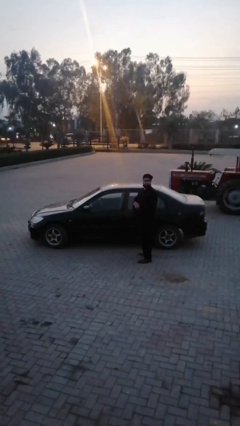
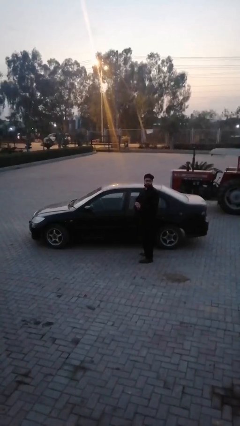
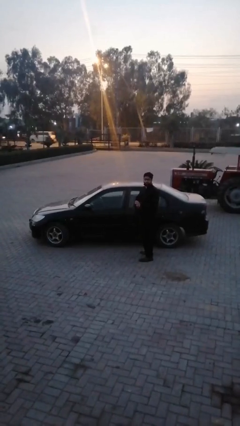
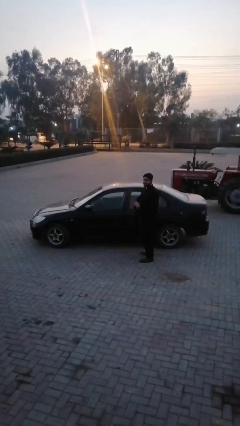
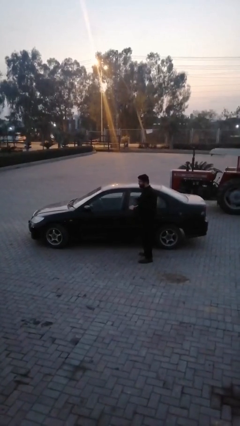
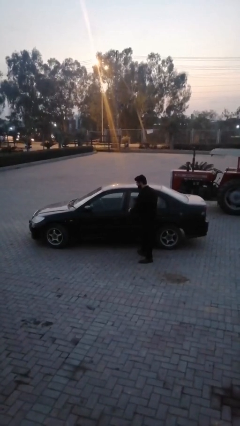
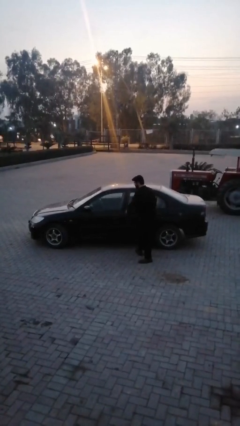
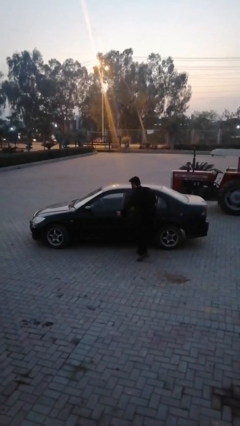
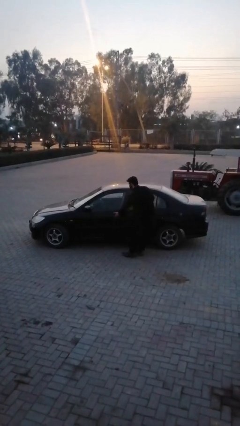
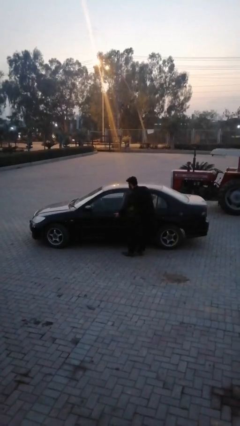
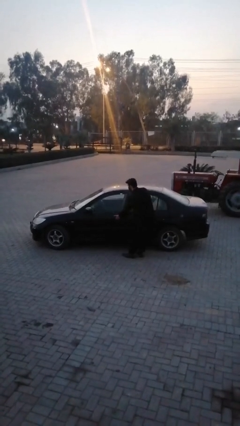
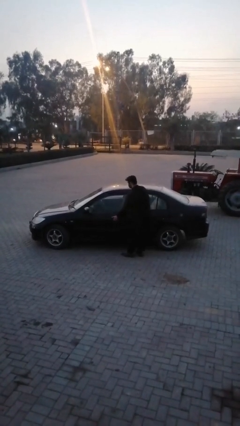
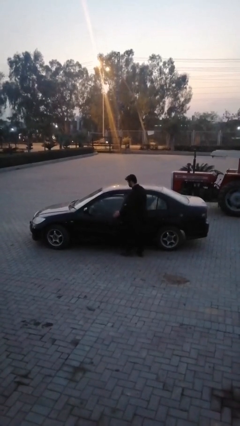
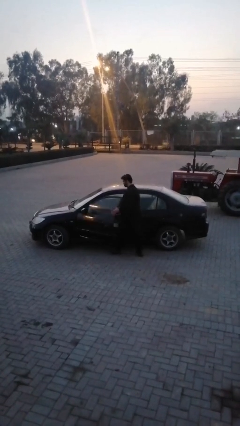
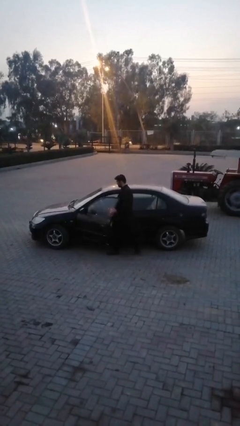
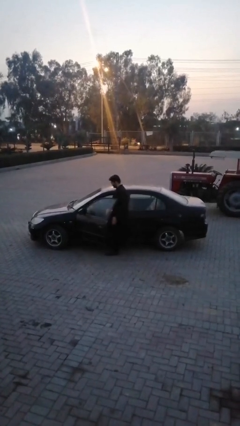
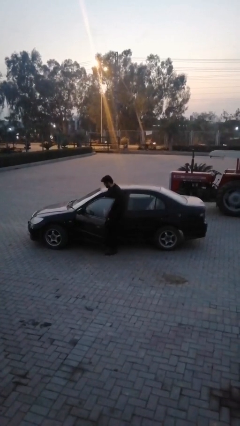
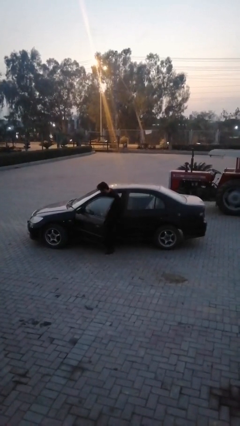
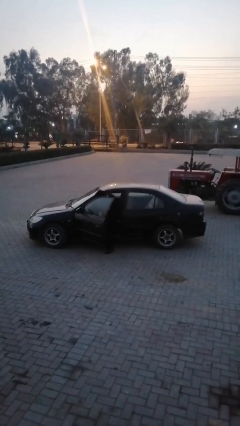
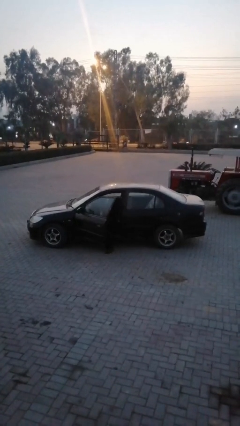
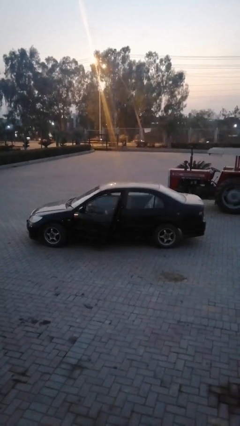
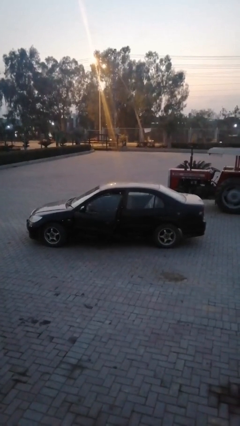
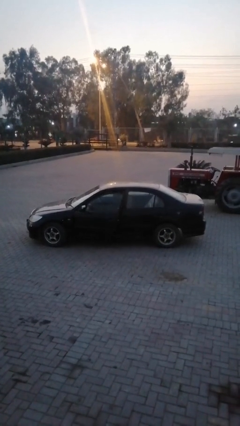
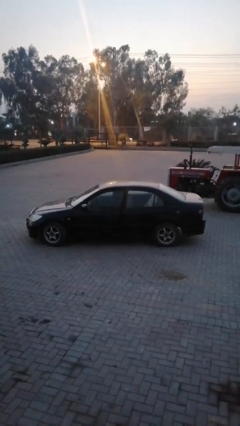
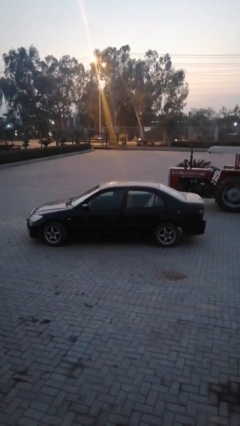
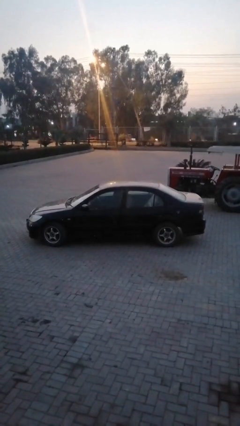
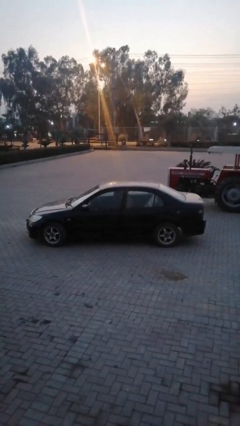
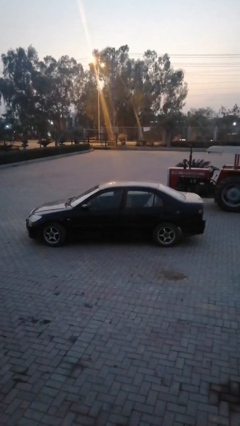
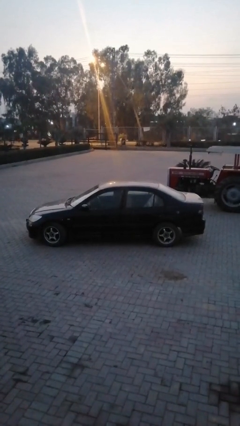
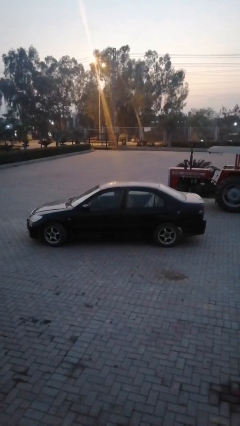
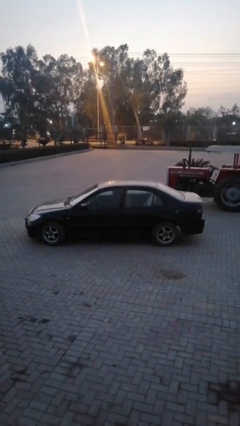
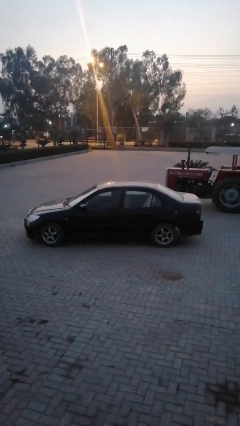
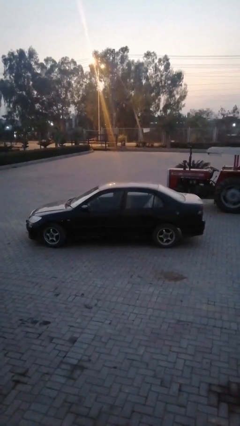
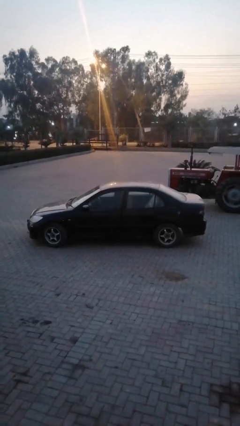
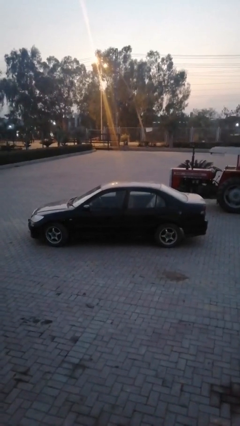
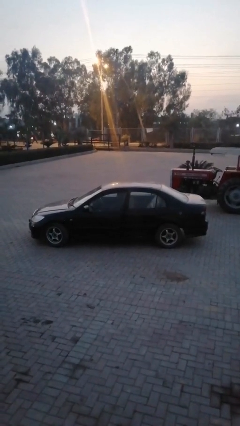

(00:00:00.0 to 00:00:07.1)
car picks up person

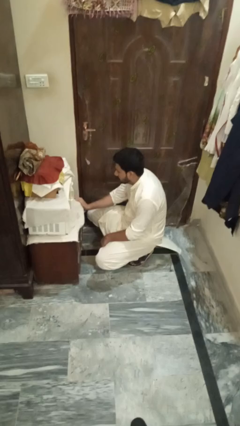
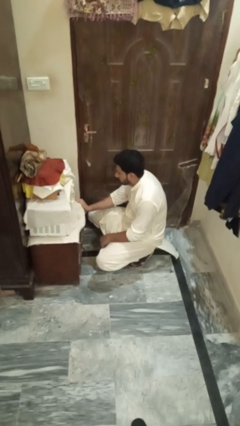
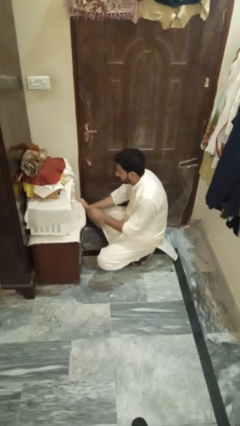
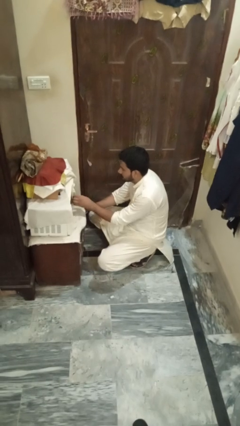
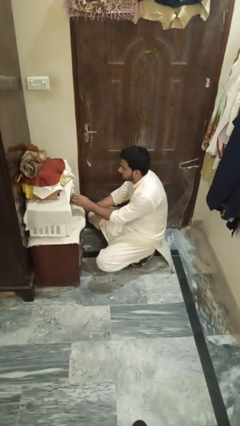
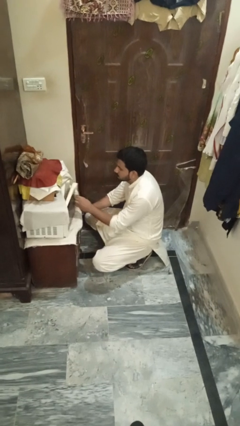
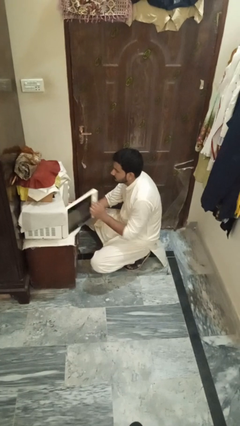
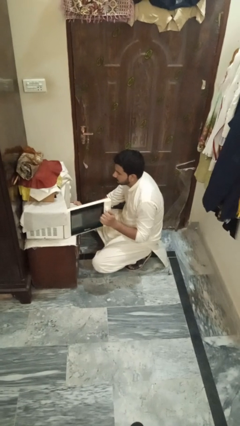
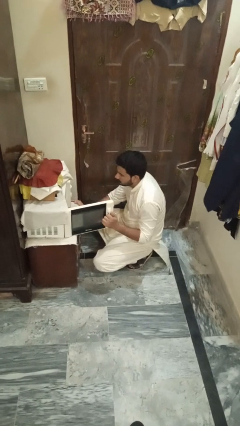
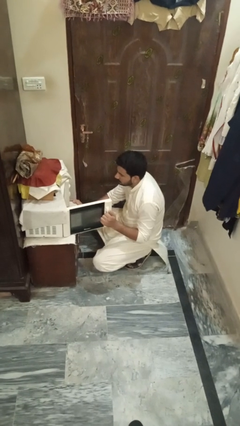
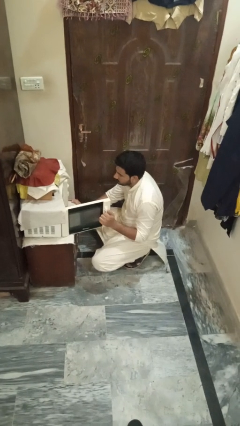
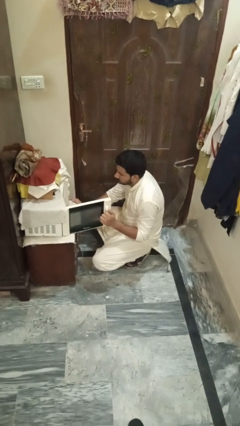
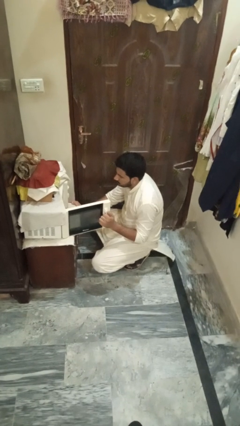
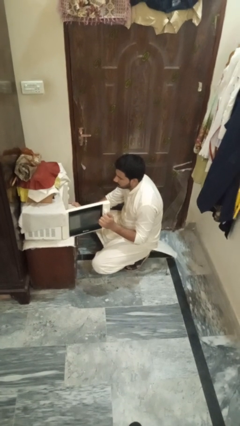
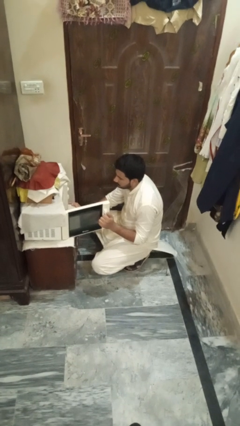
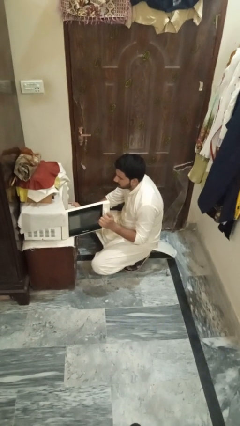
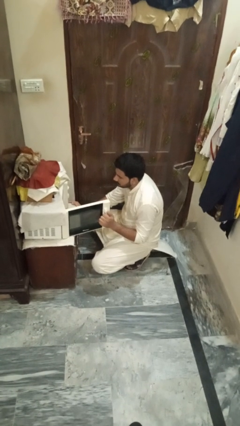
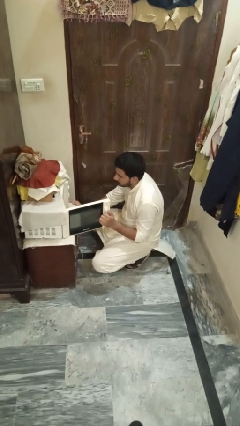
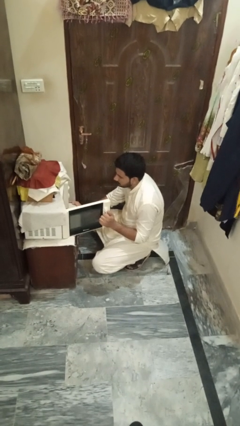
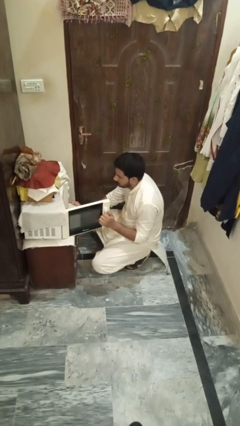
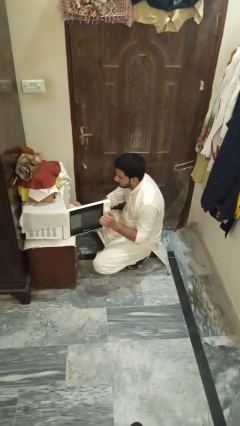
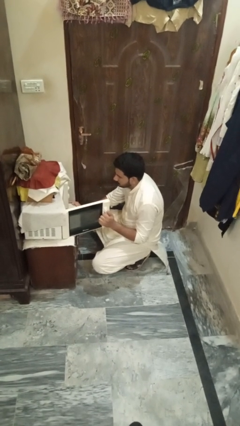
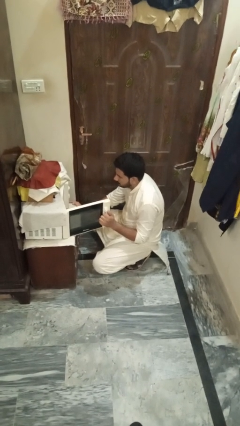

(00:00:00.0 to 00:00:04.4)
person opens microwave

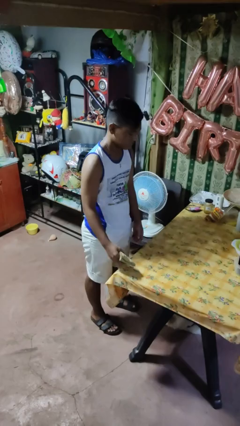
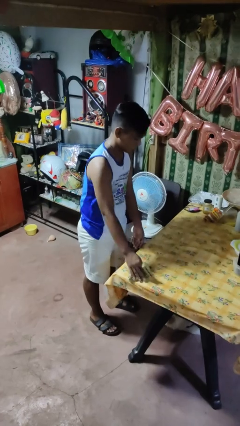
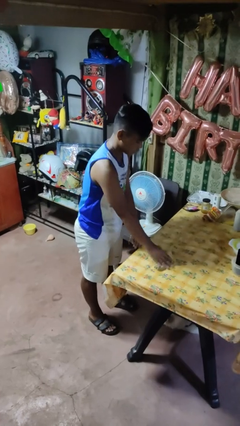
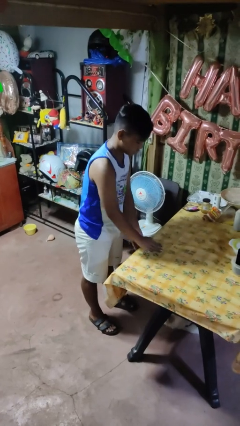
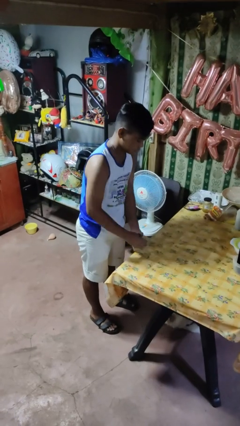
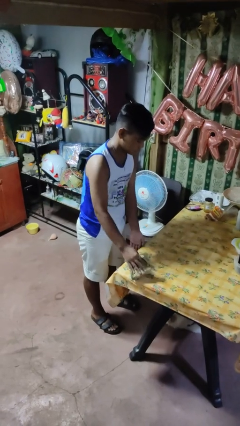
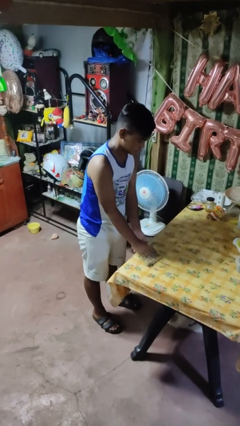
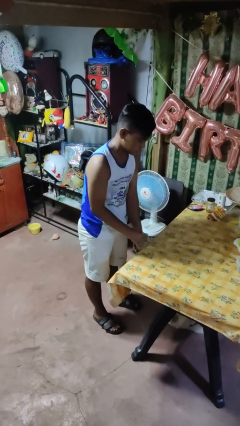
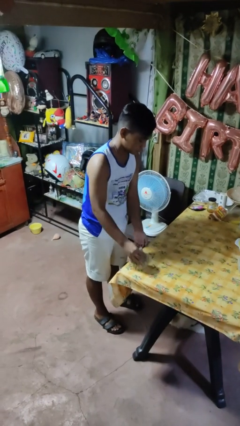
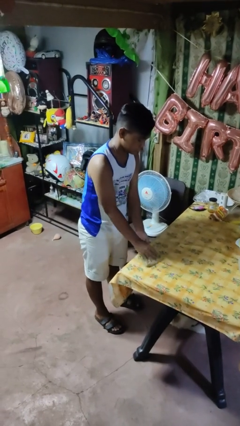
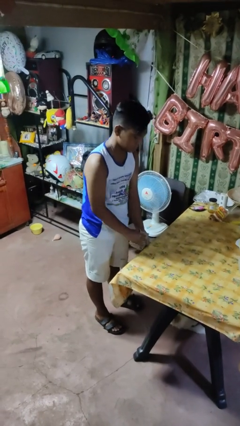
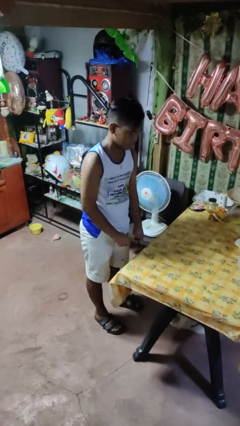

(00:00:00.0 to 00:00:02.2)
person cleans table with rag

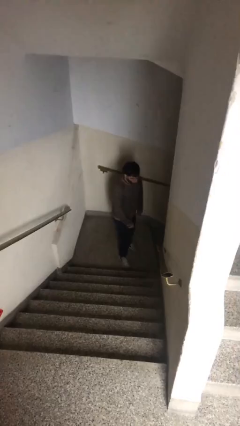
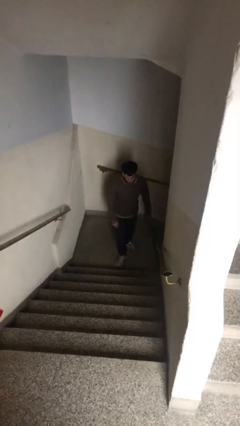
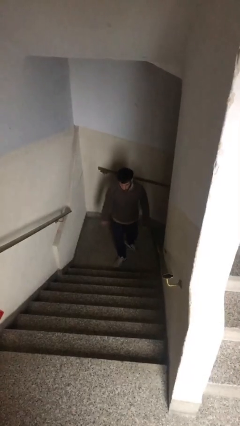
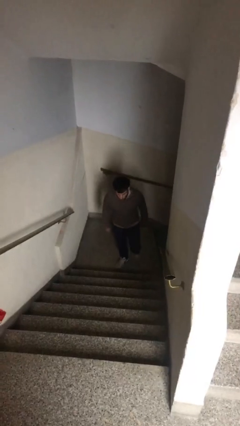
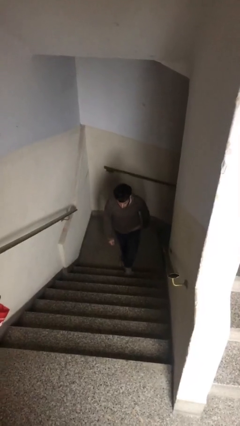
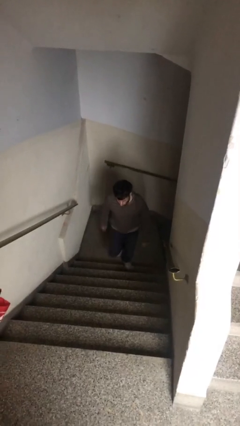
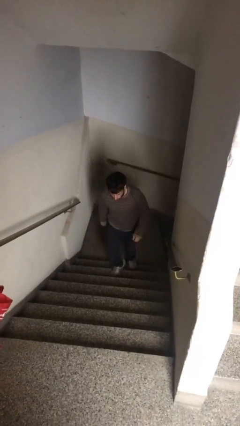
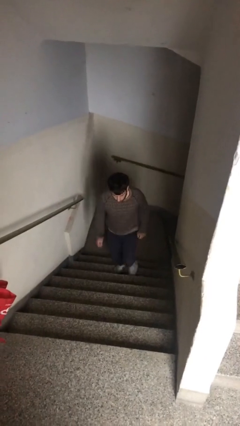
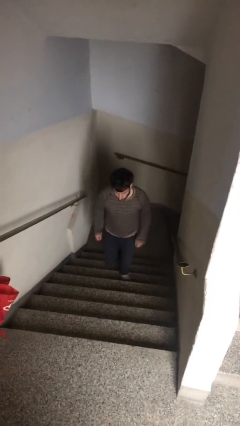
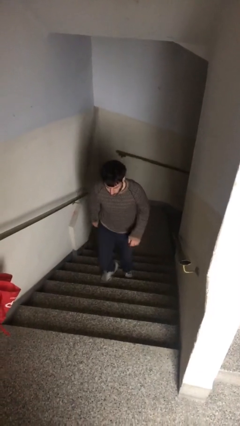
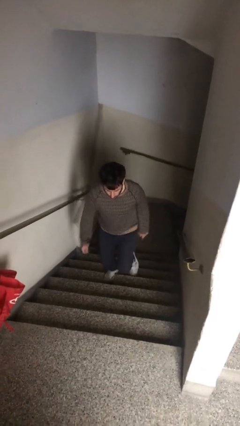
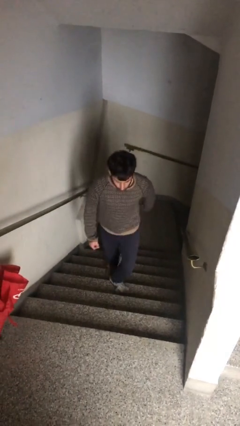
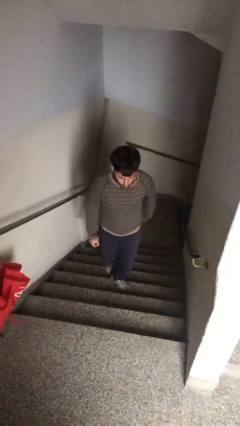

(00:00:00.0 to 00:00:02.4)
person climbs up stairs

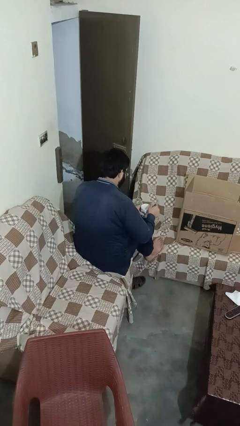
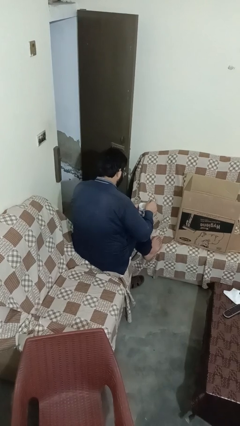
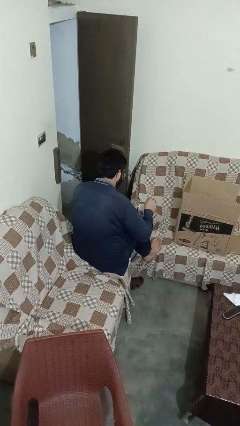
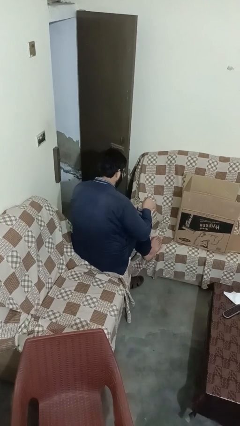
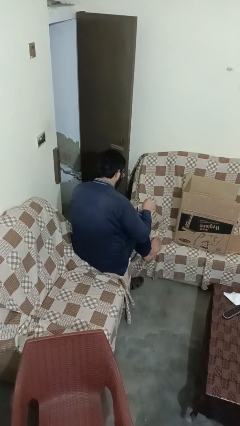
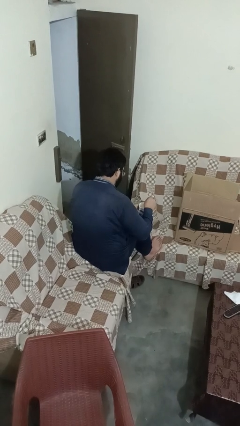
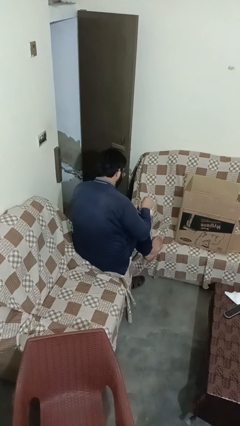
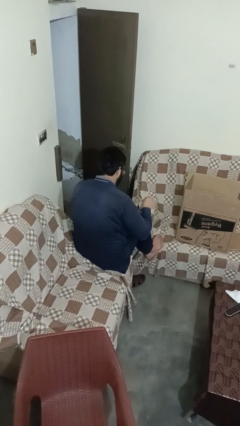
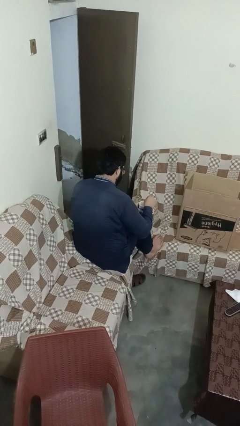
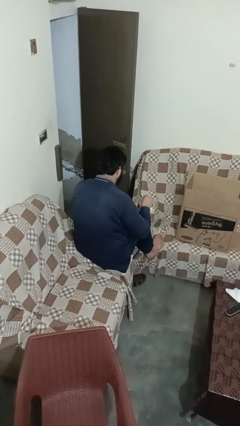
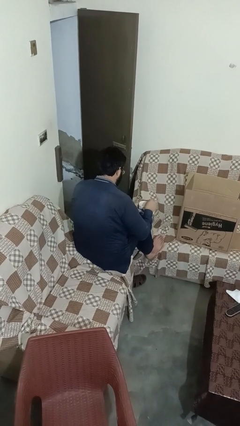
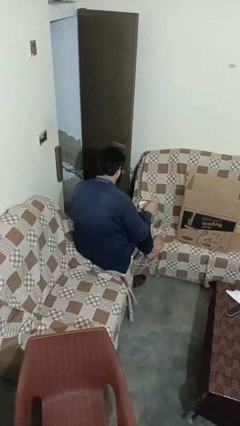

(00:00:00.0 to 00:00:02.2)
person stirs mug
